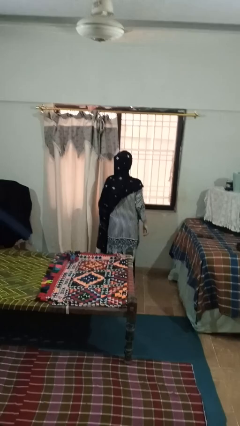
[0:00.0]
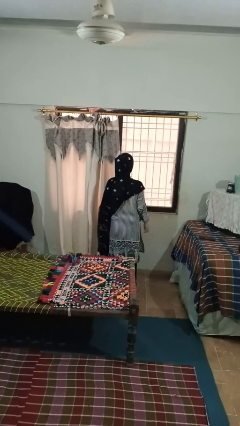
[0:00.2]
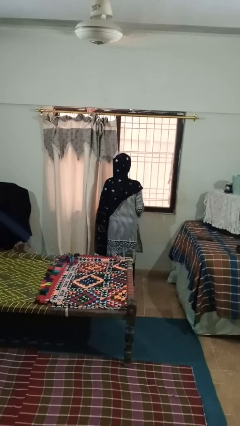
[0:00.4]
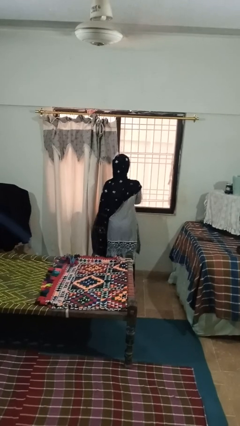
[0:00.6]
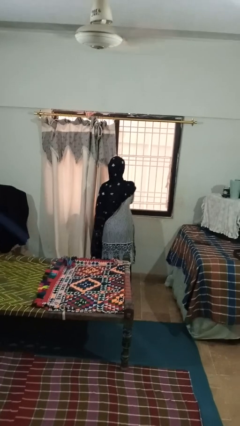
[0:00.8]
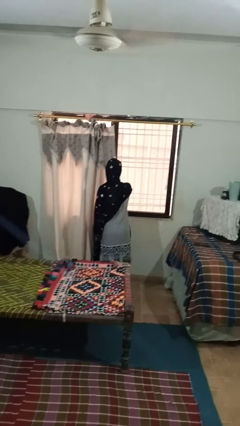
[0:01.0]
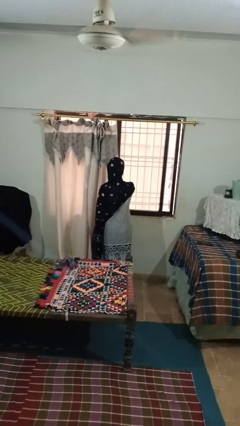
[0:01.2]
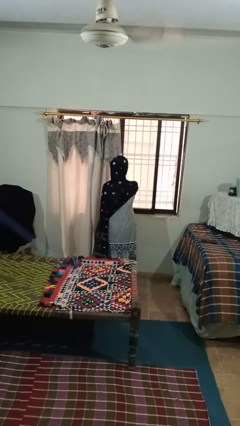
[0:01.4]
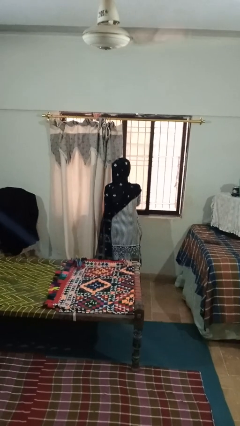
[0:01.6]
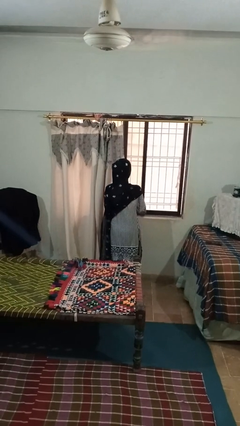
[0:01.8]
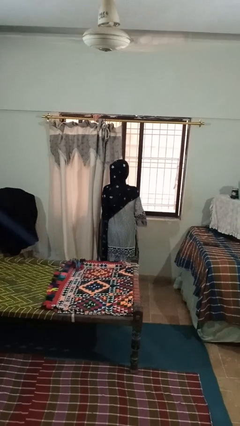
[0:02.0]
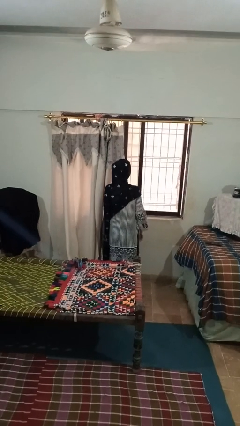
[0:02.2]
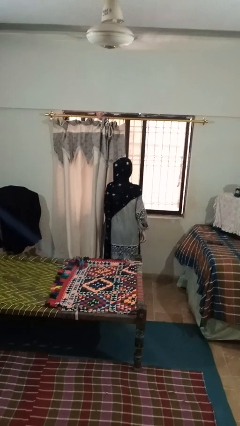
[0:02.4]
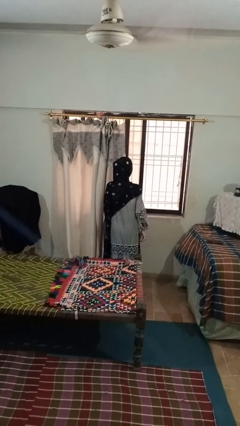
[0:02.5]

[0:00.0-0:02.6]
person opens home window

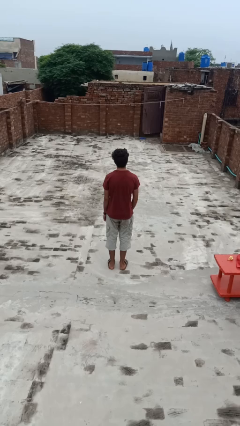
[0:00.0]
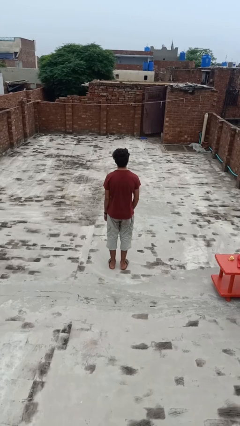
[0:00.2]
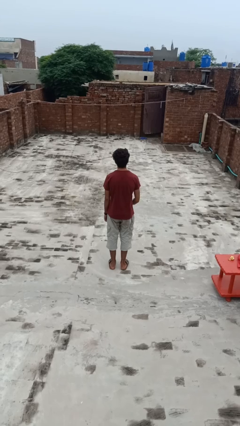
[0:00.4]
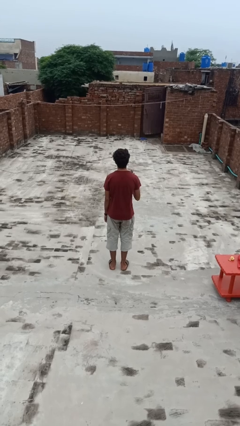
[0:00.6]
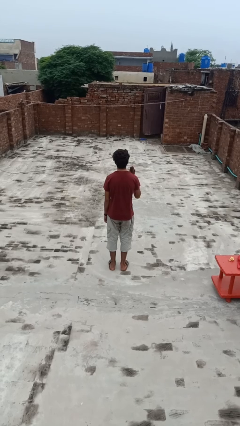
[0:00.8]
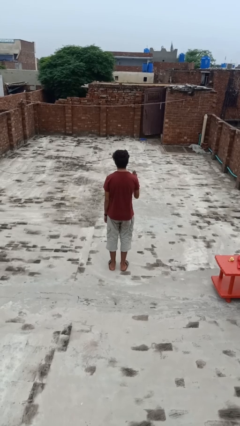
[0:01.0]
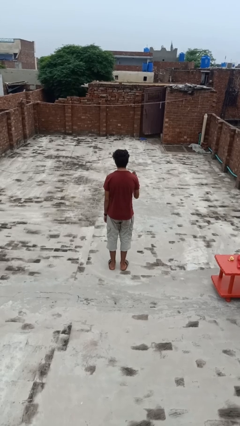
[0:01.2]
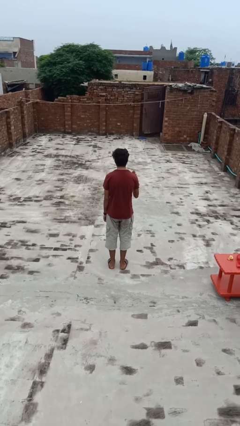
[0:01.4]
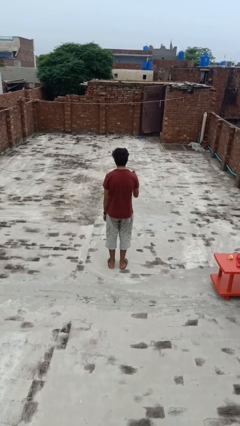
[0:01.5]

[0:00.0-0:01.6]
person gestures stop

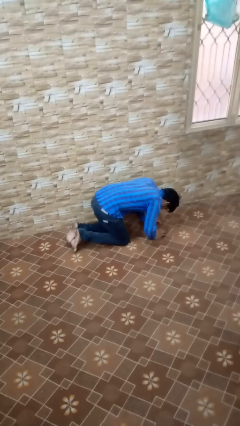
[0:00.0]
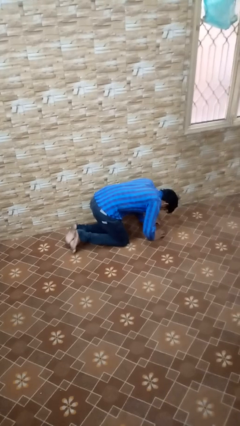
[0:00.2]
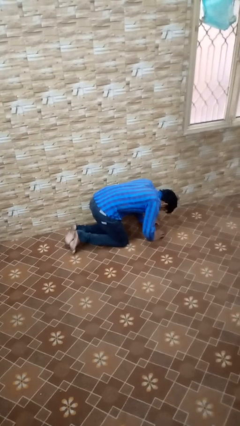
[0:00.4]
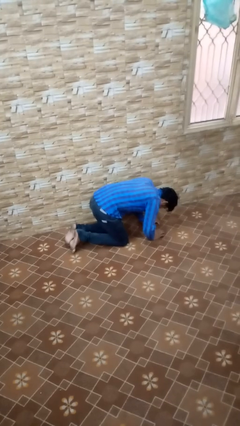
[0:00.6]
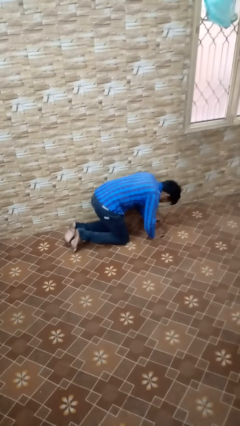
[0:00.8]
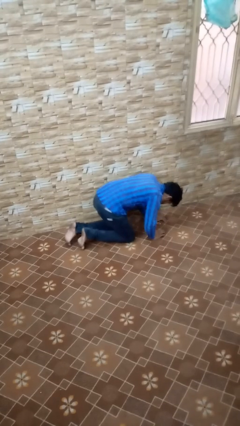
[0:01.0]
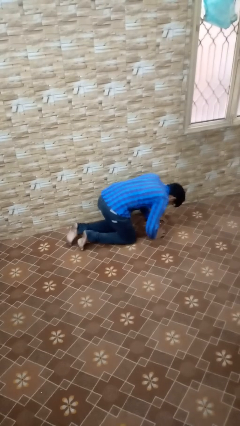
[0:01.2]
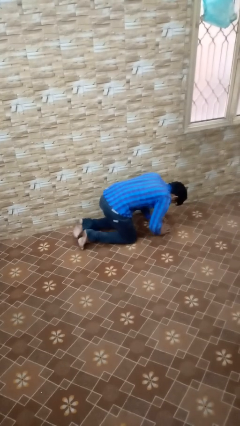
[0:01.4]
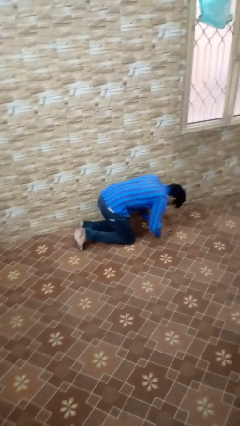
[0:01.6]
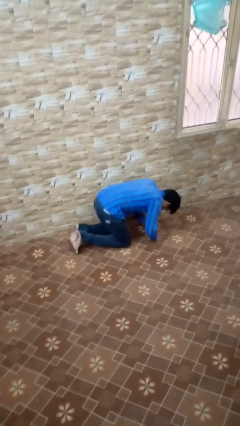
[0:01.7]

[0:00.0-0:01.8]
person crawls

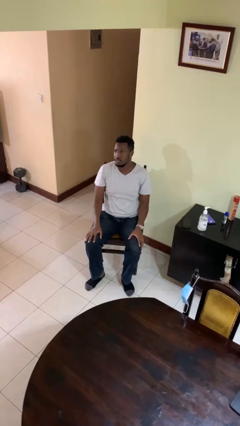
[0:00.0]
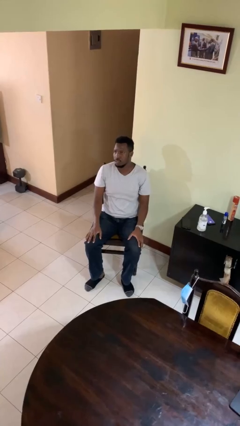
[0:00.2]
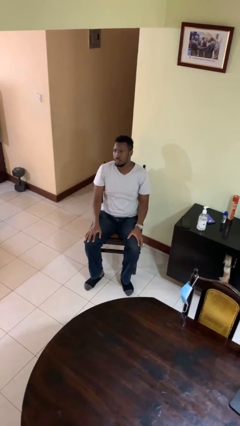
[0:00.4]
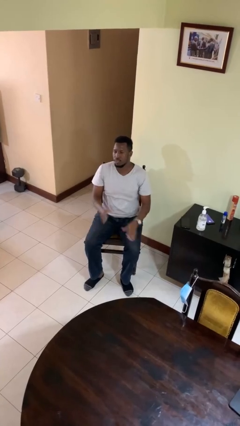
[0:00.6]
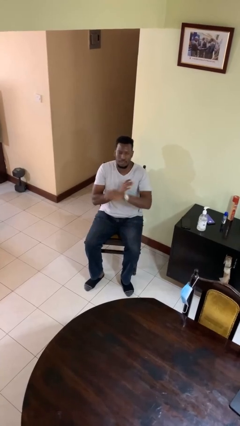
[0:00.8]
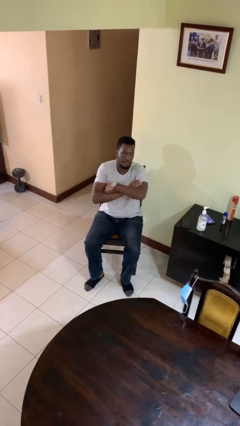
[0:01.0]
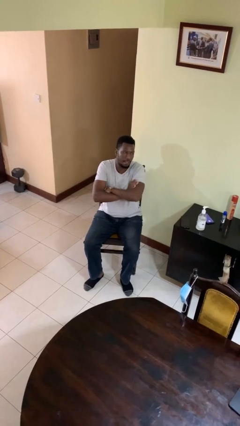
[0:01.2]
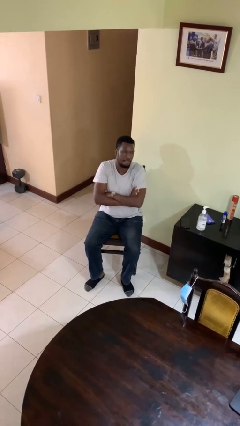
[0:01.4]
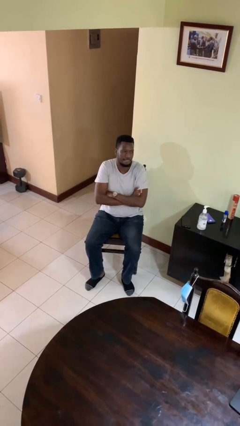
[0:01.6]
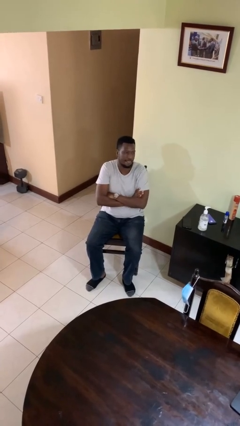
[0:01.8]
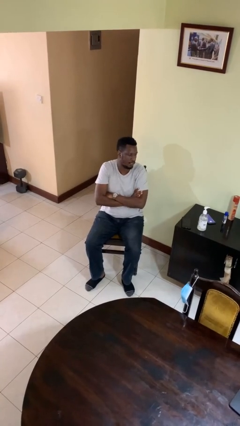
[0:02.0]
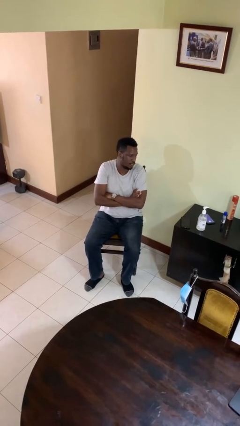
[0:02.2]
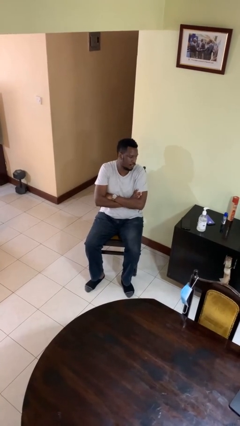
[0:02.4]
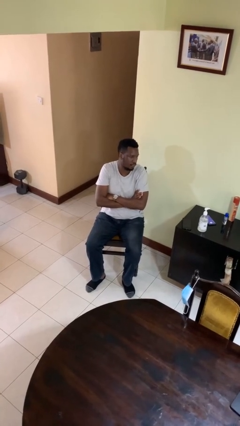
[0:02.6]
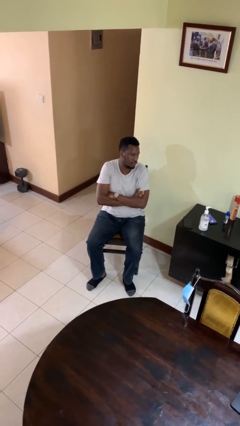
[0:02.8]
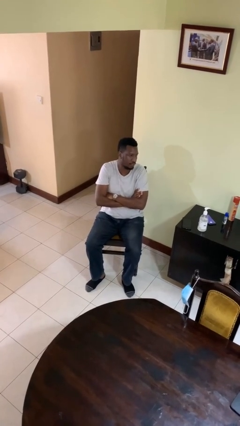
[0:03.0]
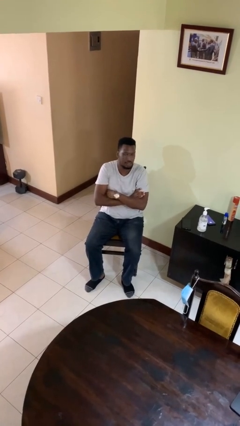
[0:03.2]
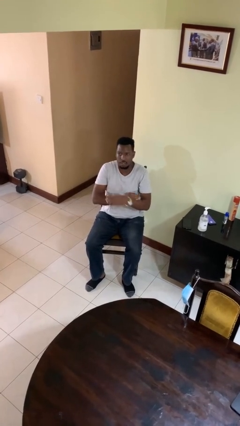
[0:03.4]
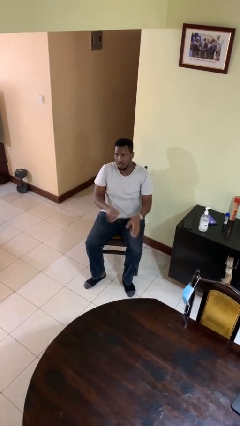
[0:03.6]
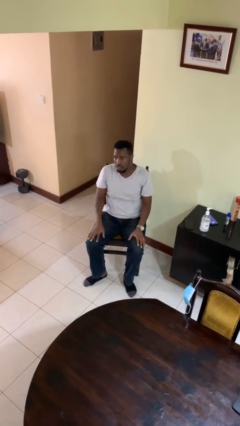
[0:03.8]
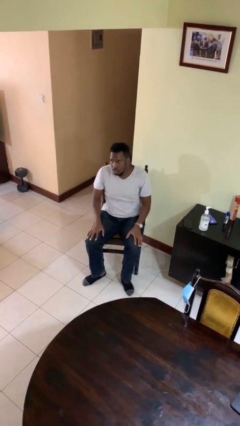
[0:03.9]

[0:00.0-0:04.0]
person crosses arms

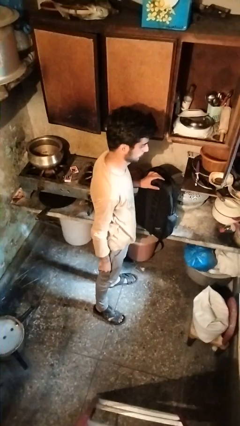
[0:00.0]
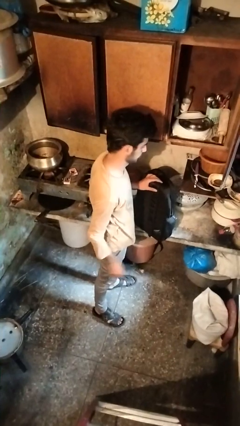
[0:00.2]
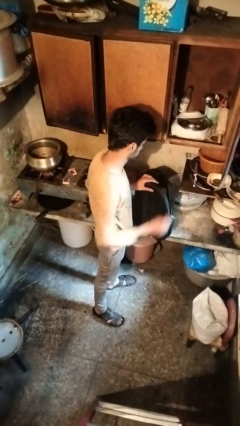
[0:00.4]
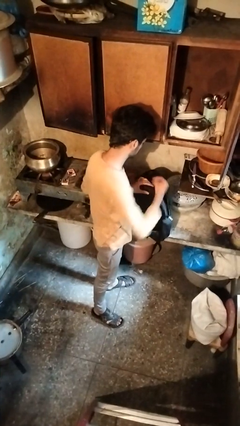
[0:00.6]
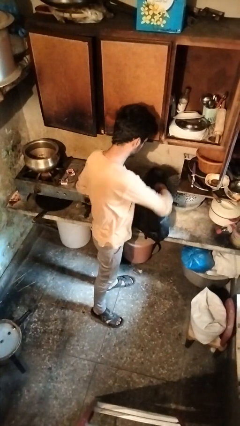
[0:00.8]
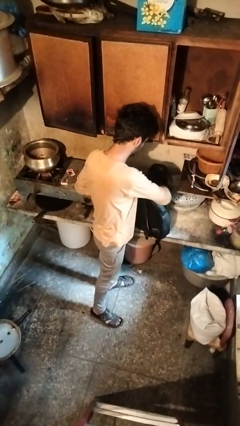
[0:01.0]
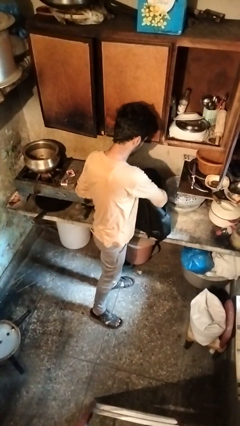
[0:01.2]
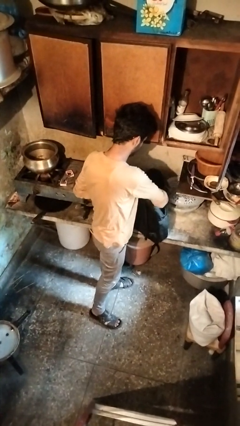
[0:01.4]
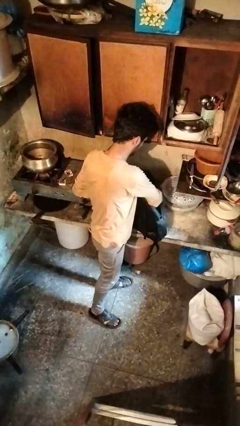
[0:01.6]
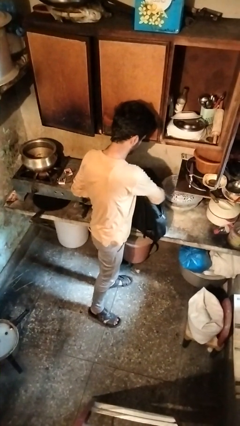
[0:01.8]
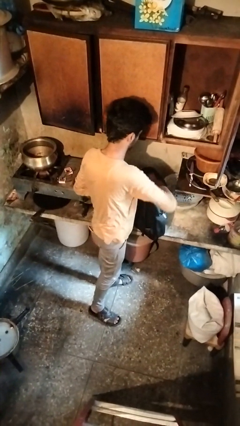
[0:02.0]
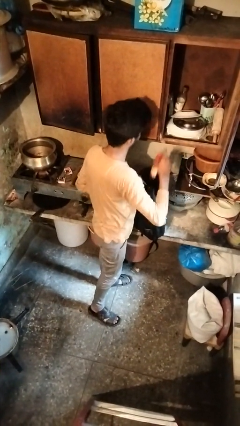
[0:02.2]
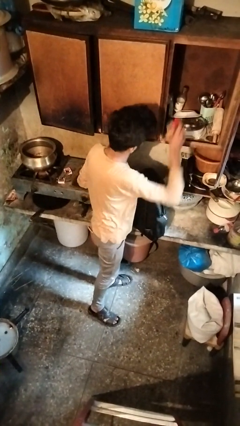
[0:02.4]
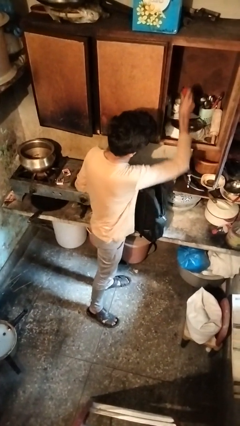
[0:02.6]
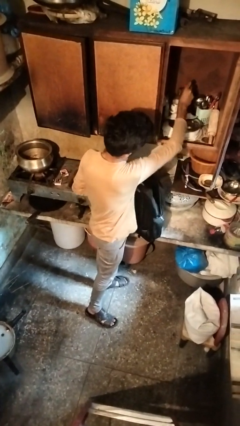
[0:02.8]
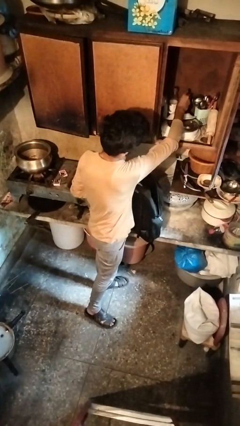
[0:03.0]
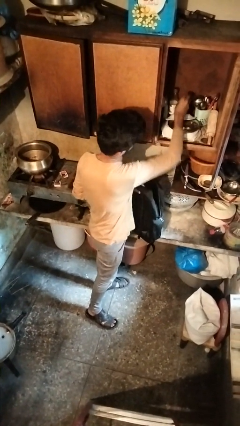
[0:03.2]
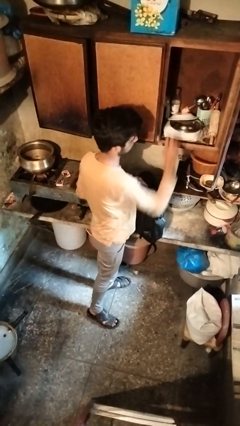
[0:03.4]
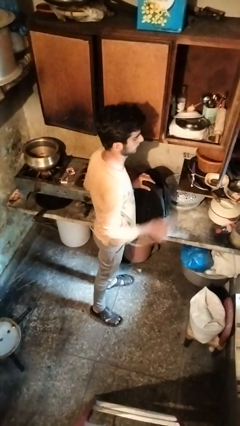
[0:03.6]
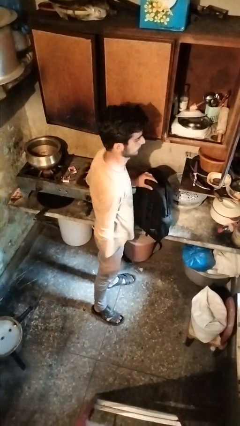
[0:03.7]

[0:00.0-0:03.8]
person loads groceries into cabinet

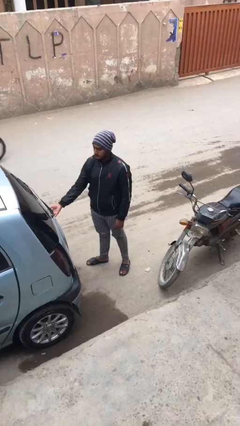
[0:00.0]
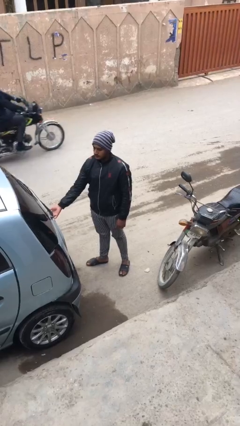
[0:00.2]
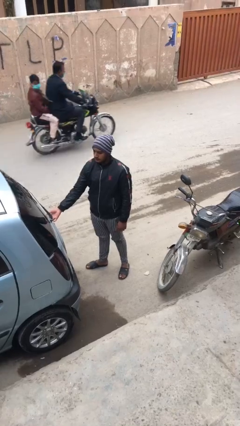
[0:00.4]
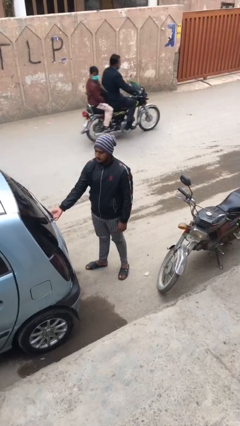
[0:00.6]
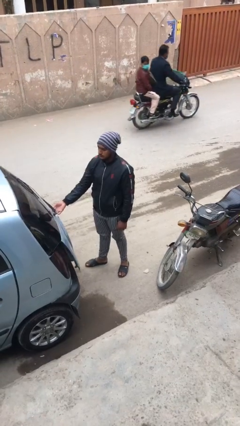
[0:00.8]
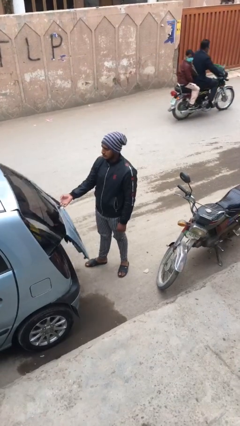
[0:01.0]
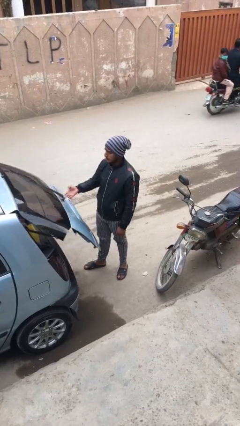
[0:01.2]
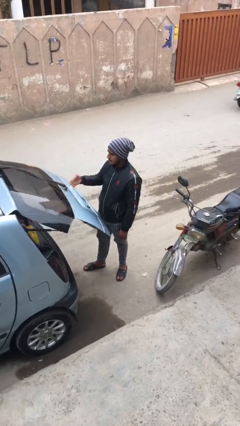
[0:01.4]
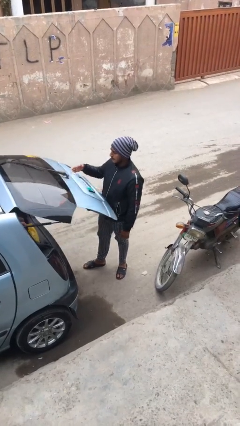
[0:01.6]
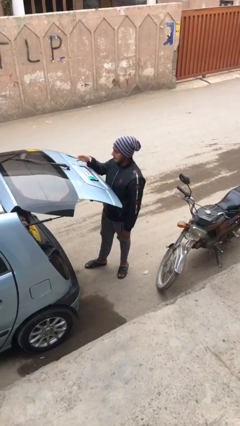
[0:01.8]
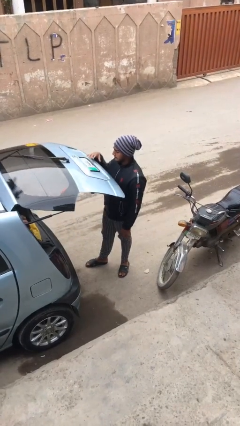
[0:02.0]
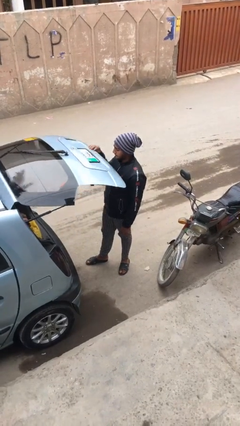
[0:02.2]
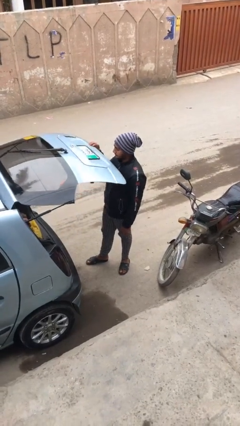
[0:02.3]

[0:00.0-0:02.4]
person opens car trunk

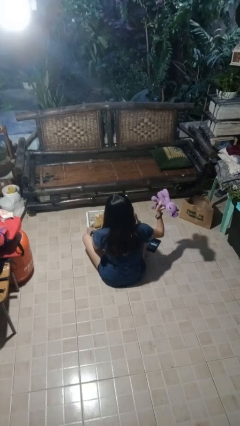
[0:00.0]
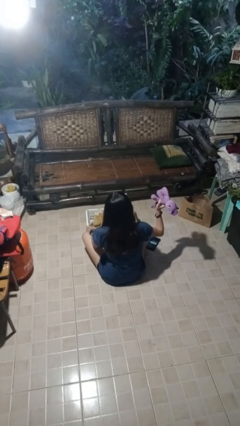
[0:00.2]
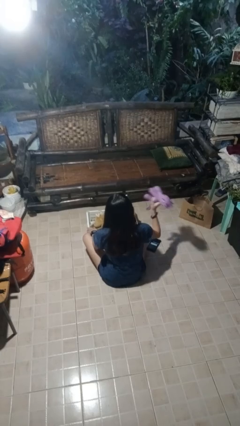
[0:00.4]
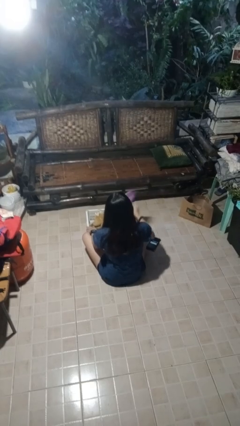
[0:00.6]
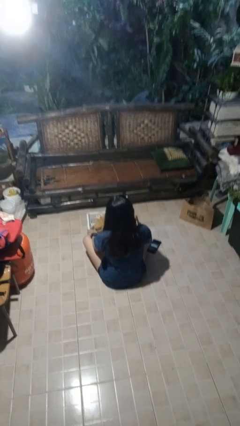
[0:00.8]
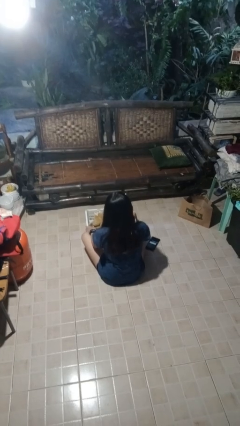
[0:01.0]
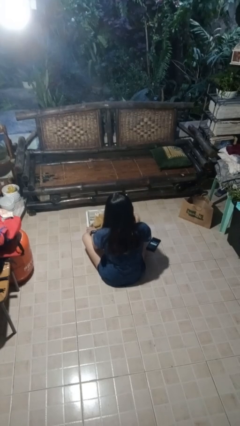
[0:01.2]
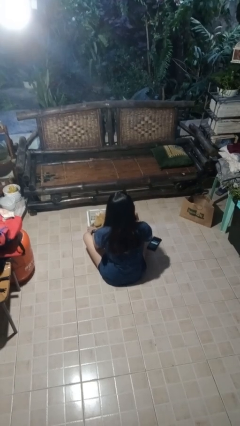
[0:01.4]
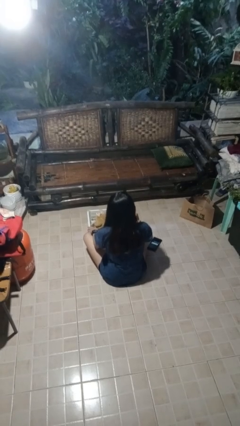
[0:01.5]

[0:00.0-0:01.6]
person puts object into basket
